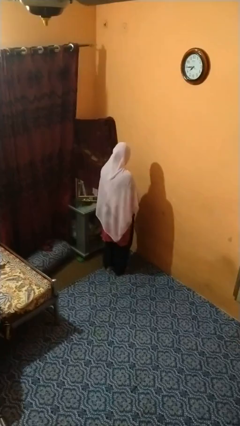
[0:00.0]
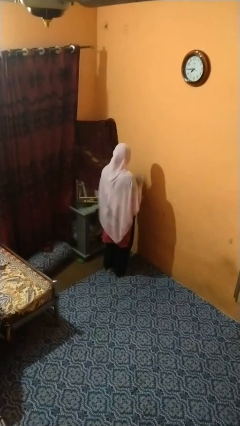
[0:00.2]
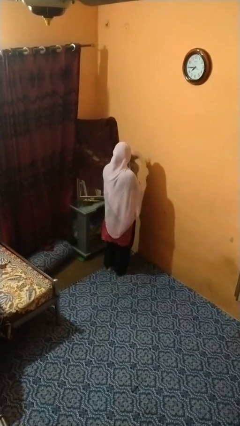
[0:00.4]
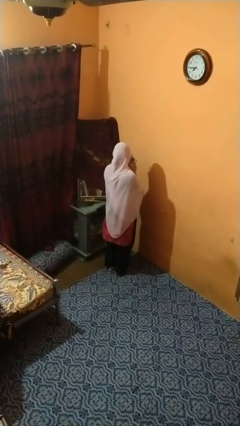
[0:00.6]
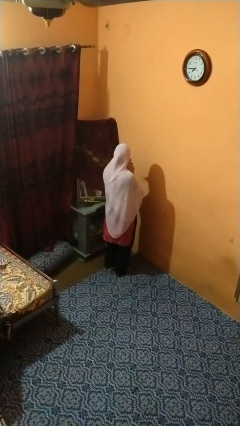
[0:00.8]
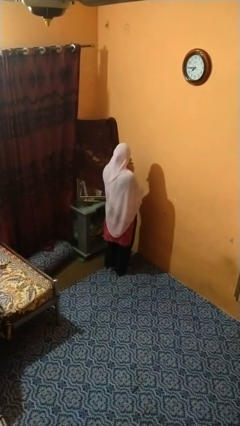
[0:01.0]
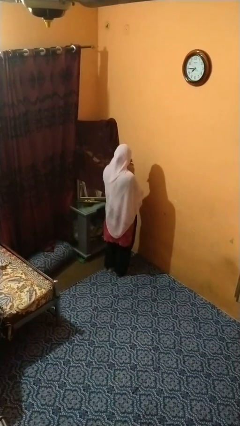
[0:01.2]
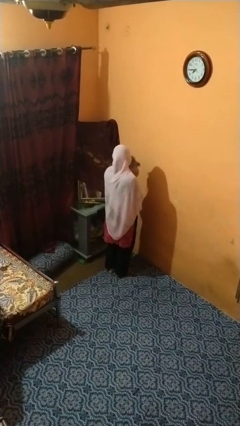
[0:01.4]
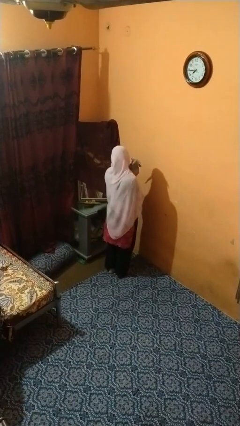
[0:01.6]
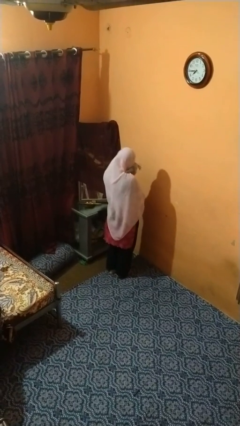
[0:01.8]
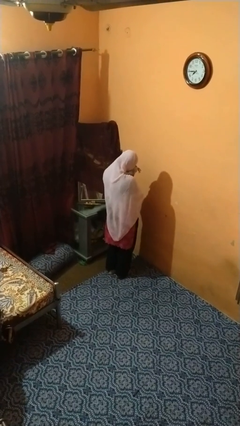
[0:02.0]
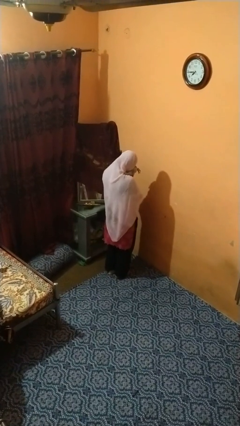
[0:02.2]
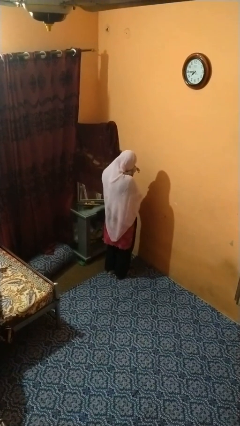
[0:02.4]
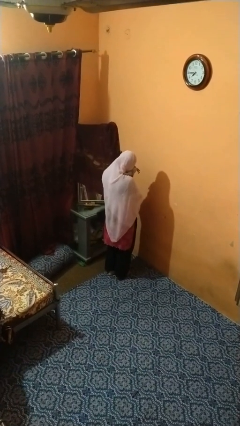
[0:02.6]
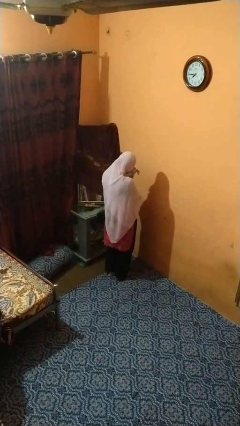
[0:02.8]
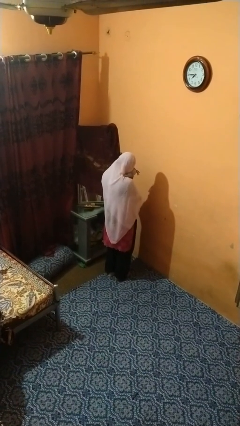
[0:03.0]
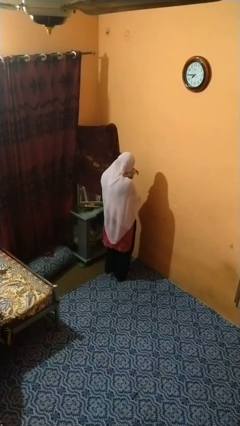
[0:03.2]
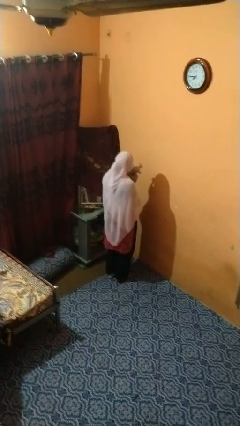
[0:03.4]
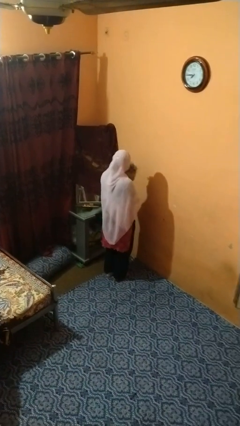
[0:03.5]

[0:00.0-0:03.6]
person hugs stuffed animal

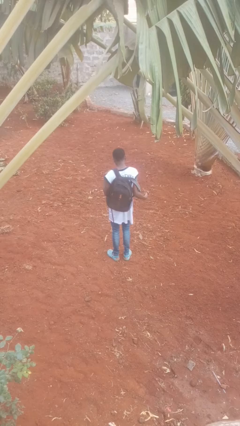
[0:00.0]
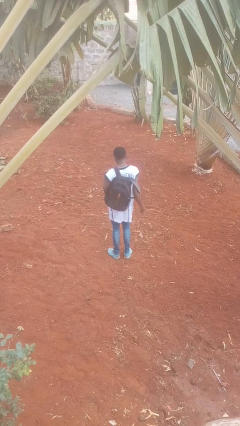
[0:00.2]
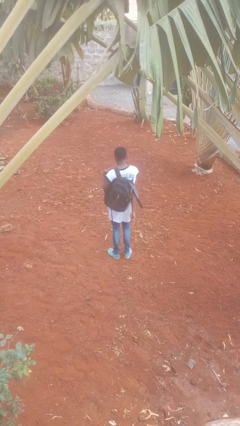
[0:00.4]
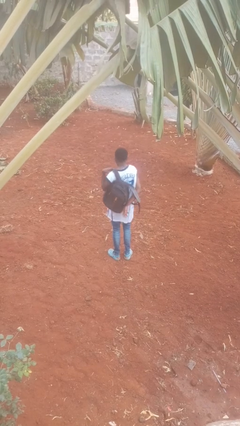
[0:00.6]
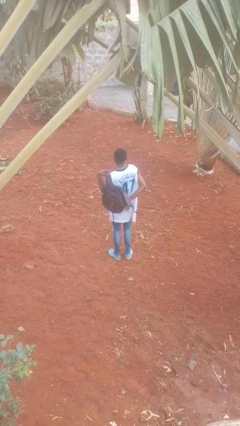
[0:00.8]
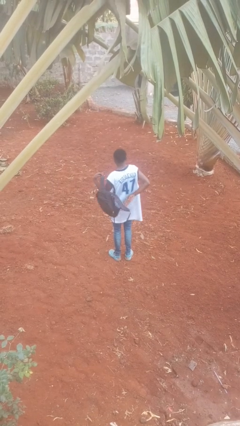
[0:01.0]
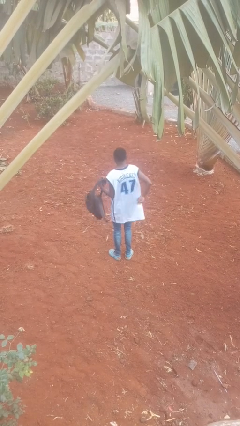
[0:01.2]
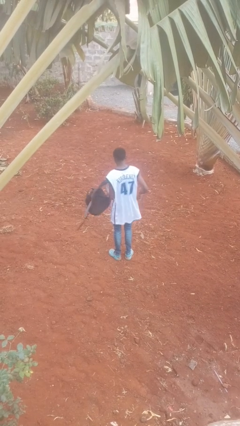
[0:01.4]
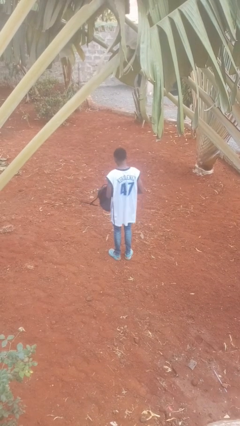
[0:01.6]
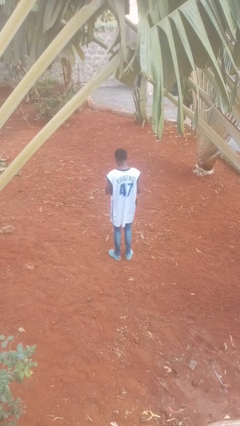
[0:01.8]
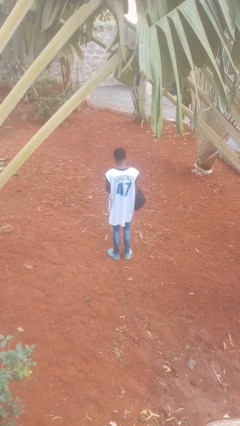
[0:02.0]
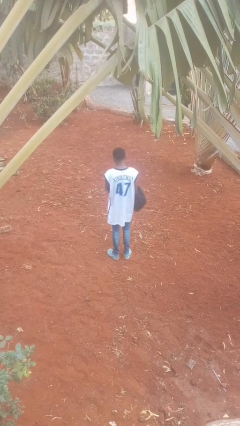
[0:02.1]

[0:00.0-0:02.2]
person takes off backpack

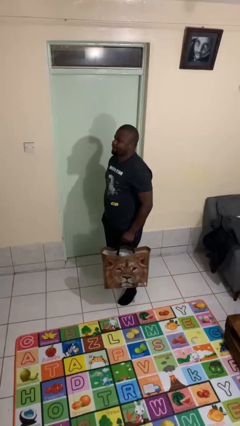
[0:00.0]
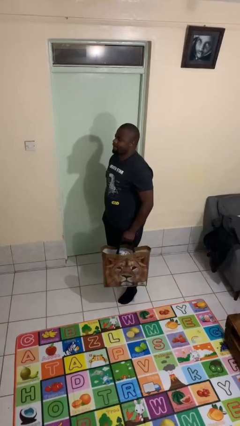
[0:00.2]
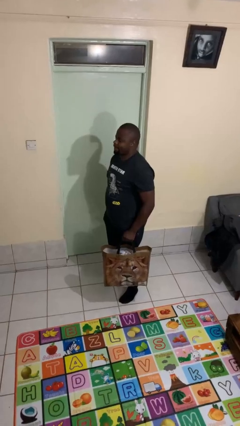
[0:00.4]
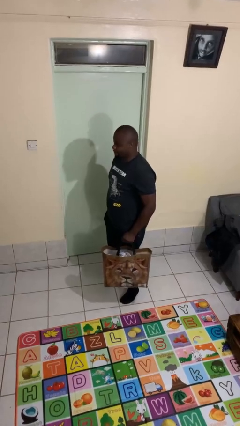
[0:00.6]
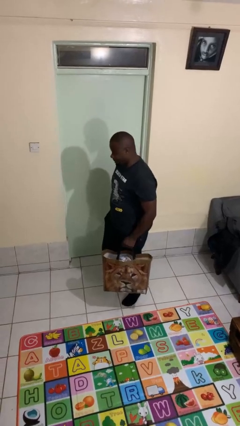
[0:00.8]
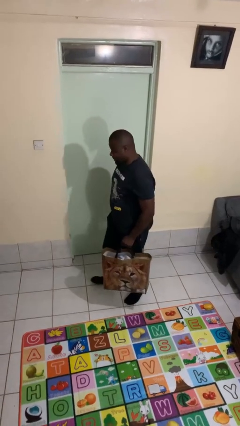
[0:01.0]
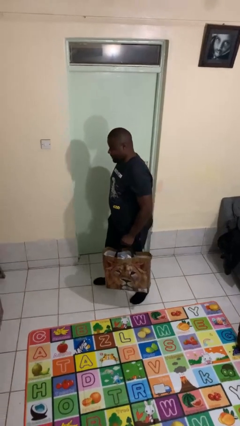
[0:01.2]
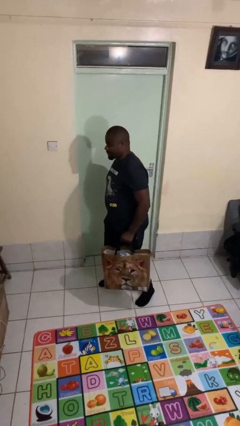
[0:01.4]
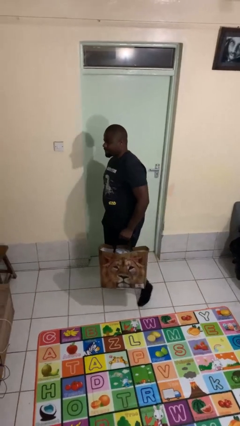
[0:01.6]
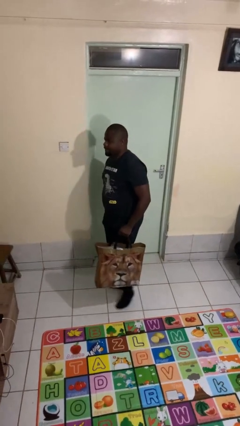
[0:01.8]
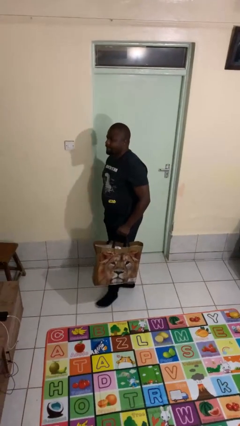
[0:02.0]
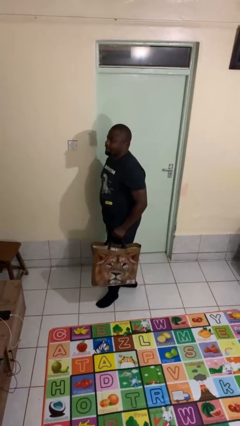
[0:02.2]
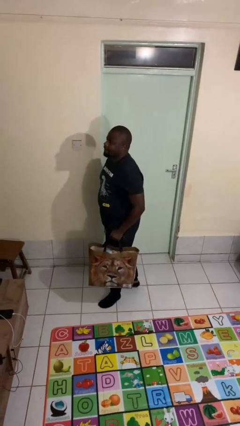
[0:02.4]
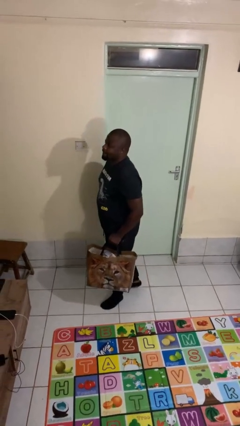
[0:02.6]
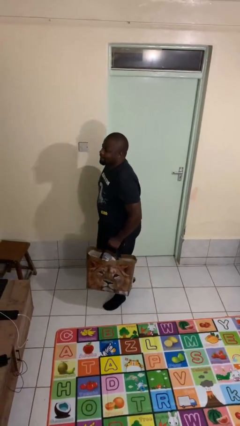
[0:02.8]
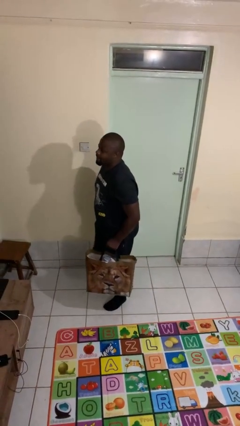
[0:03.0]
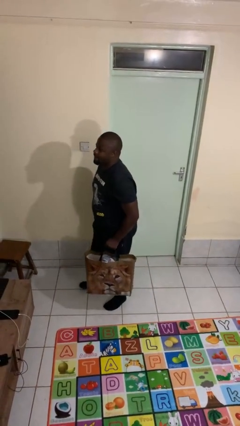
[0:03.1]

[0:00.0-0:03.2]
person carries groceries

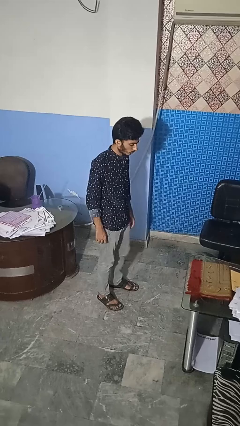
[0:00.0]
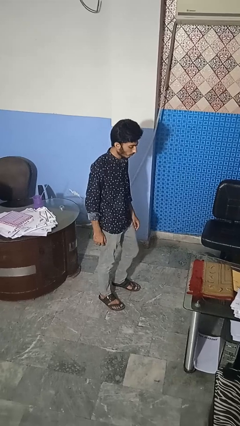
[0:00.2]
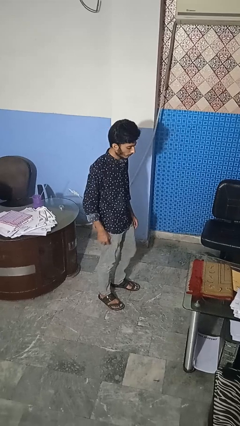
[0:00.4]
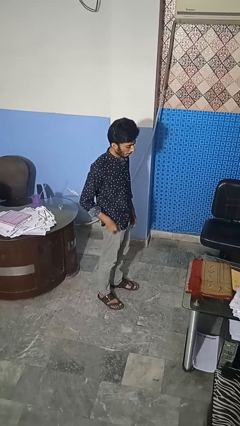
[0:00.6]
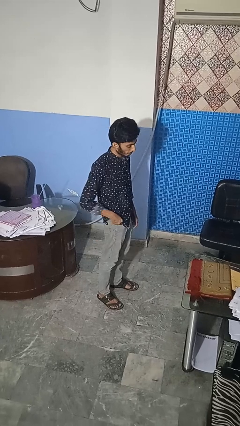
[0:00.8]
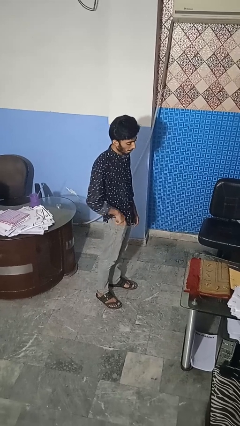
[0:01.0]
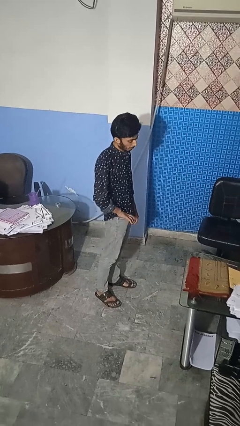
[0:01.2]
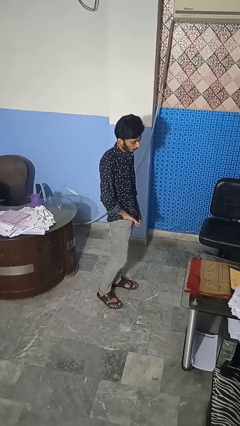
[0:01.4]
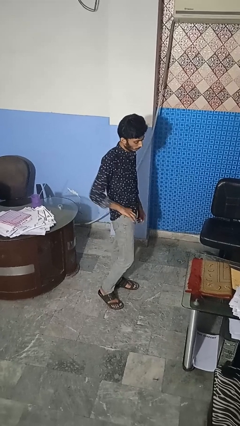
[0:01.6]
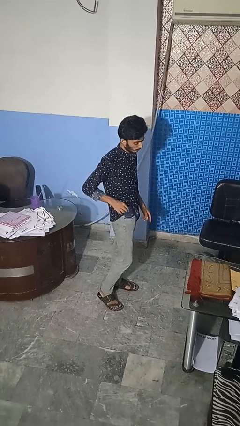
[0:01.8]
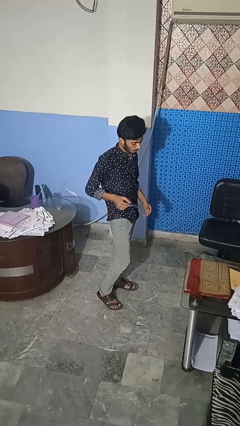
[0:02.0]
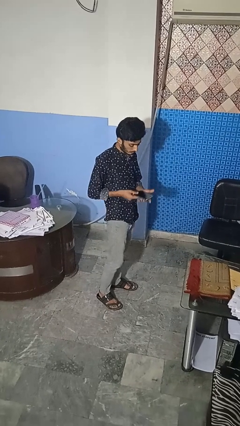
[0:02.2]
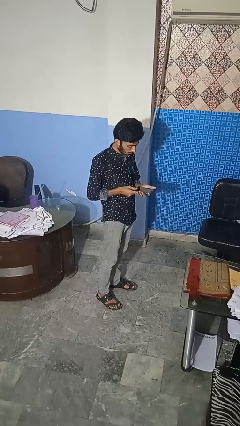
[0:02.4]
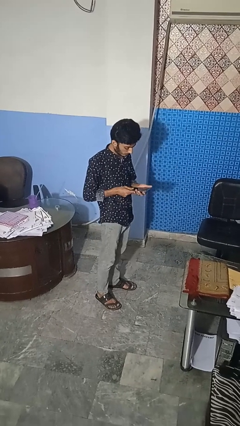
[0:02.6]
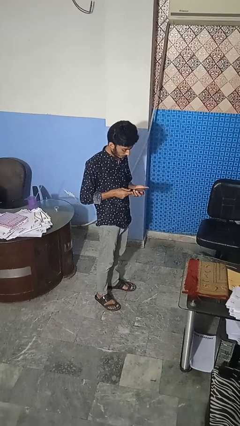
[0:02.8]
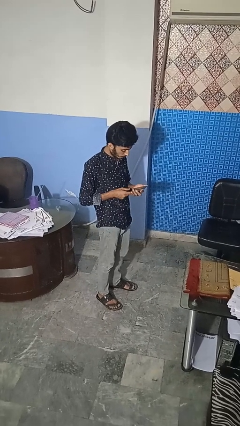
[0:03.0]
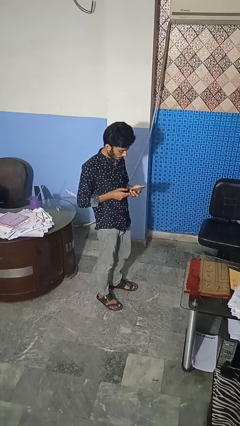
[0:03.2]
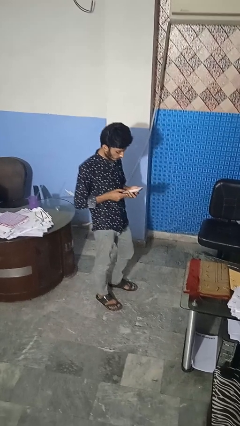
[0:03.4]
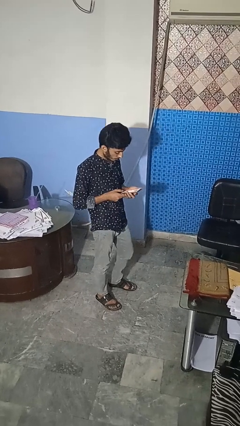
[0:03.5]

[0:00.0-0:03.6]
person takes phone from pocket

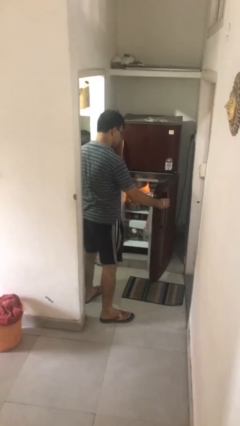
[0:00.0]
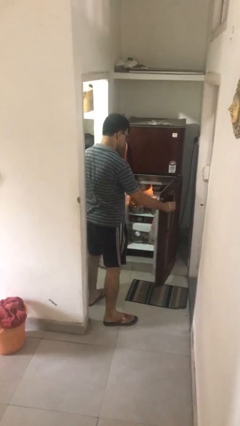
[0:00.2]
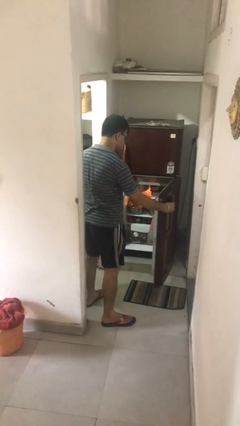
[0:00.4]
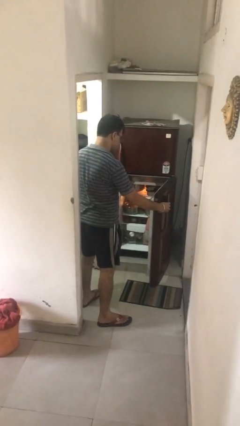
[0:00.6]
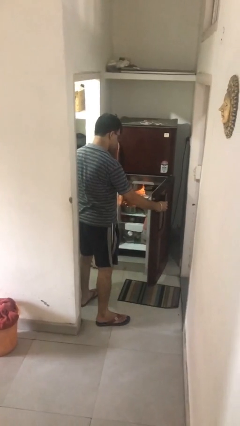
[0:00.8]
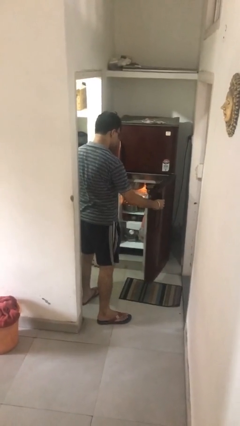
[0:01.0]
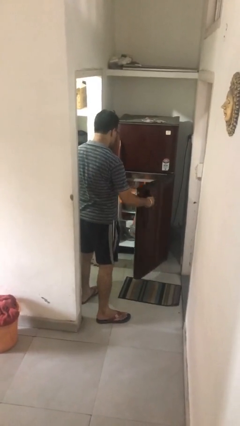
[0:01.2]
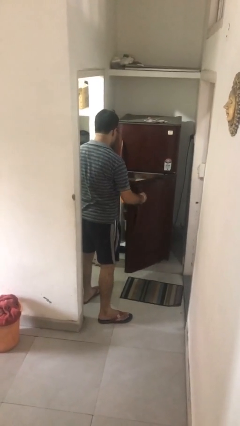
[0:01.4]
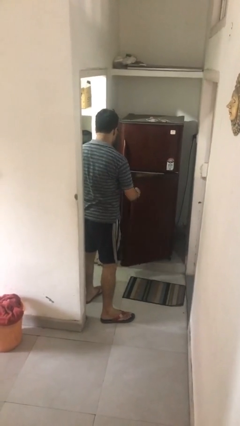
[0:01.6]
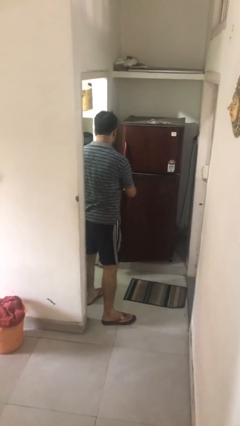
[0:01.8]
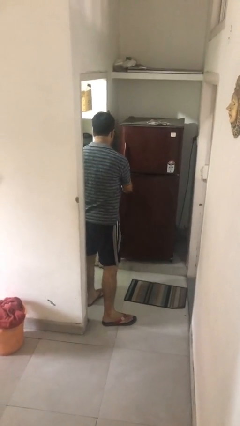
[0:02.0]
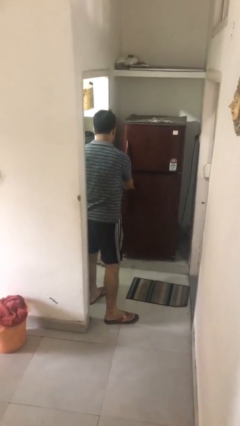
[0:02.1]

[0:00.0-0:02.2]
person closes refrigerator

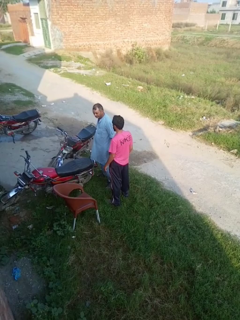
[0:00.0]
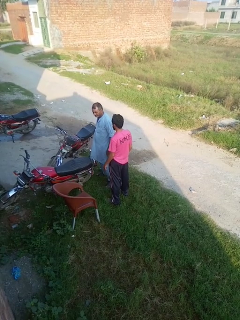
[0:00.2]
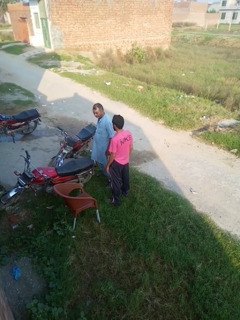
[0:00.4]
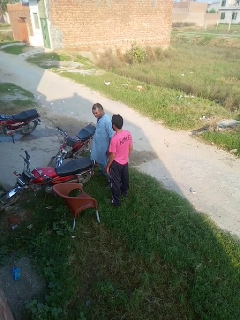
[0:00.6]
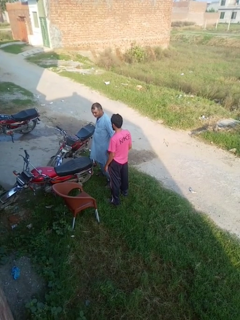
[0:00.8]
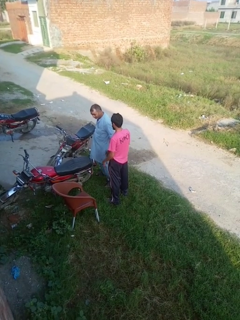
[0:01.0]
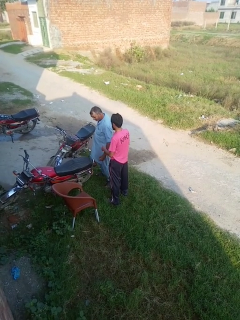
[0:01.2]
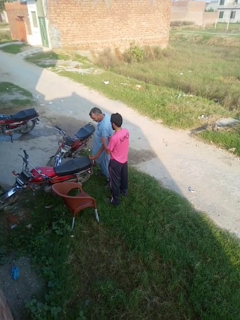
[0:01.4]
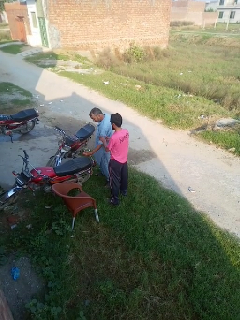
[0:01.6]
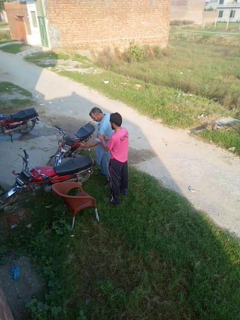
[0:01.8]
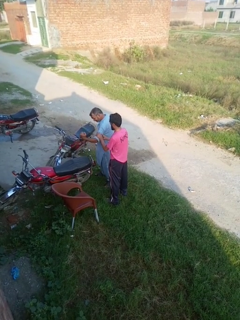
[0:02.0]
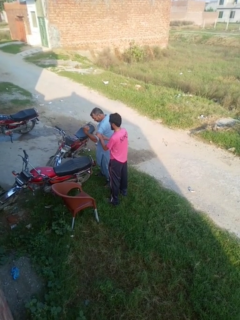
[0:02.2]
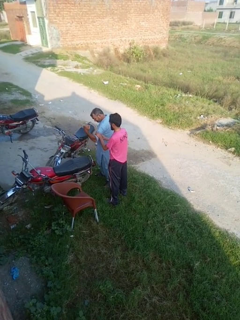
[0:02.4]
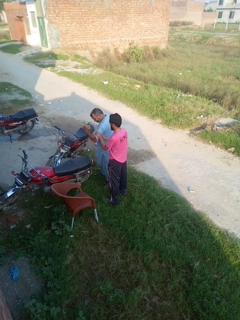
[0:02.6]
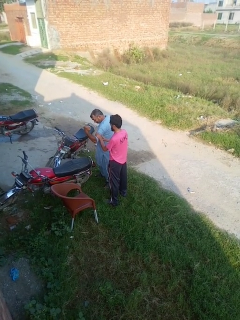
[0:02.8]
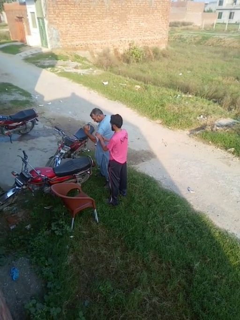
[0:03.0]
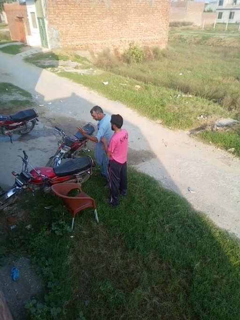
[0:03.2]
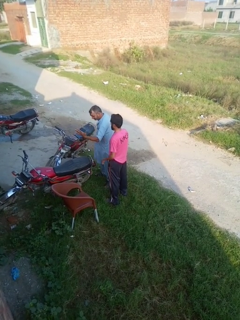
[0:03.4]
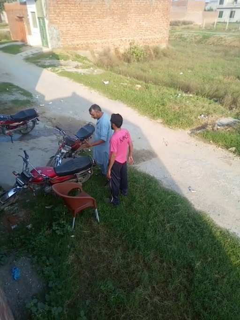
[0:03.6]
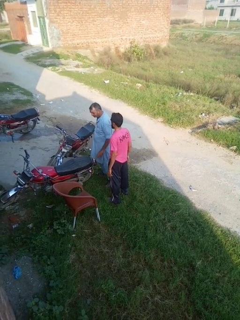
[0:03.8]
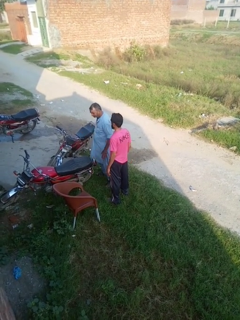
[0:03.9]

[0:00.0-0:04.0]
person grabs person by bicep
